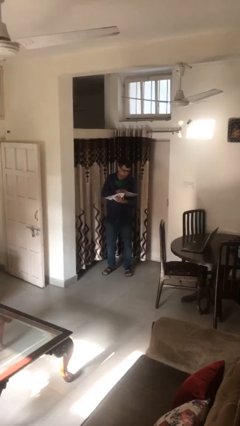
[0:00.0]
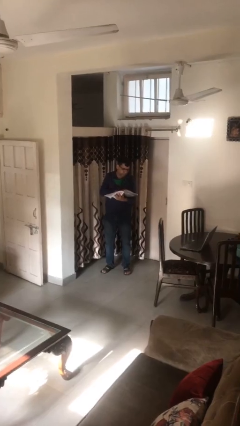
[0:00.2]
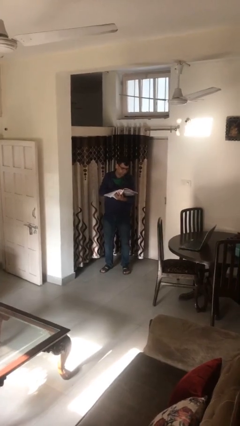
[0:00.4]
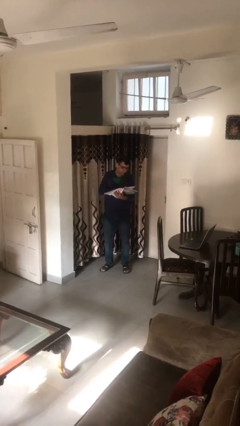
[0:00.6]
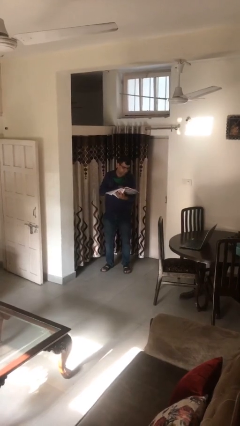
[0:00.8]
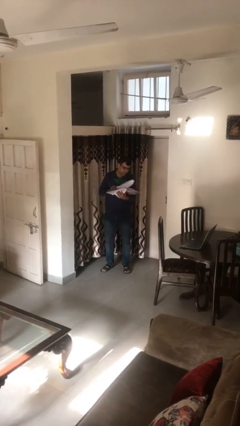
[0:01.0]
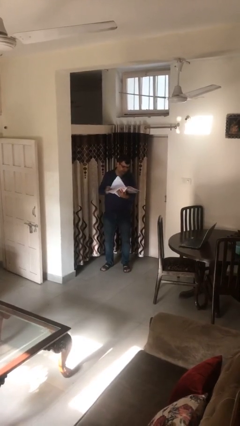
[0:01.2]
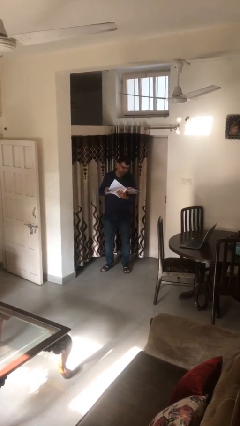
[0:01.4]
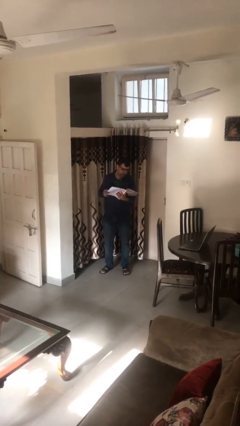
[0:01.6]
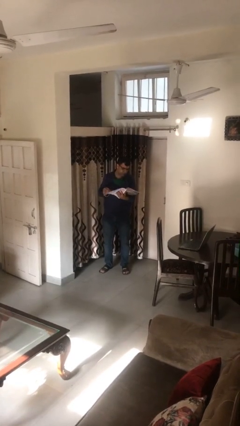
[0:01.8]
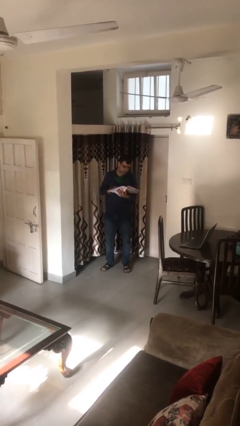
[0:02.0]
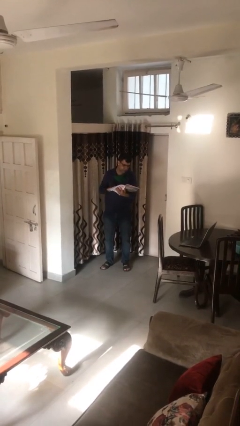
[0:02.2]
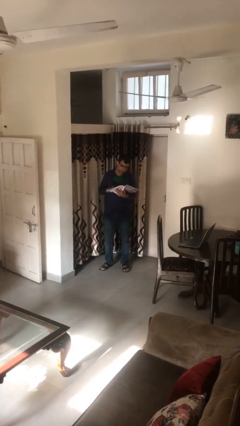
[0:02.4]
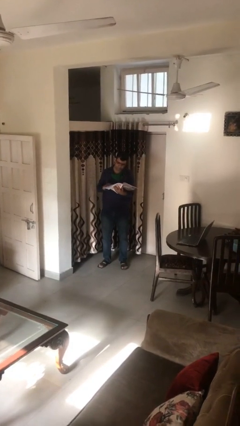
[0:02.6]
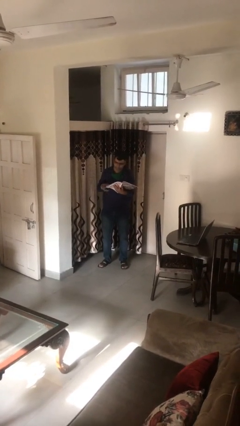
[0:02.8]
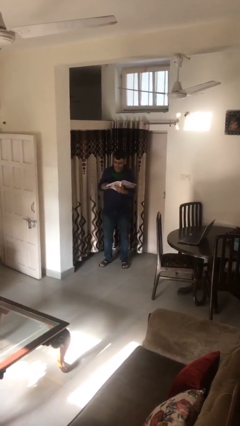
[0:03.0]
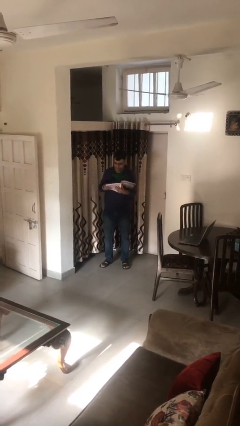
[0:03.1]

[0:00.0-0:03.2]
person reads document

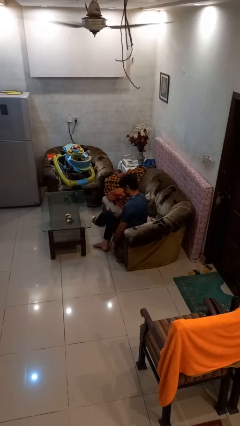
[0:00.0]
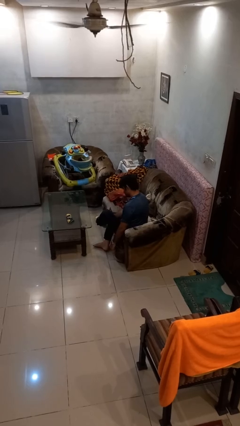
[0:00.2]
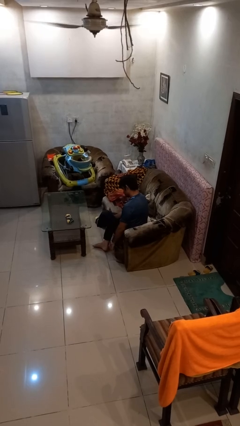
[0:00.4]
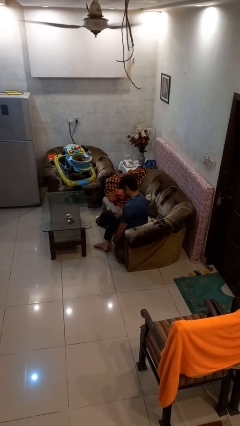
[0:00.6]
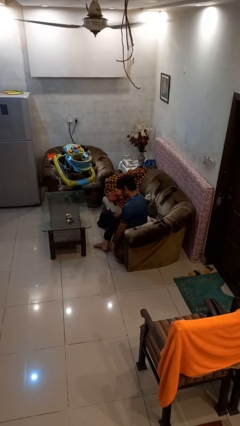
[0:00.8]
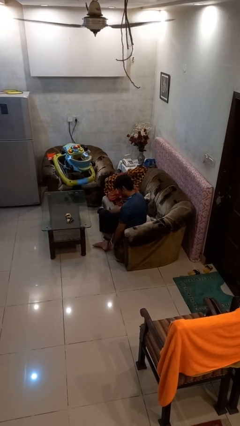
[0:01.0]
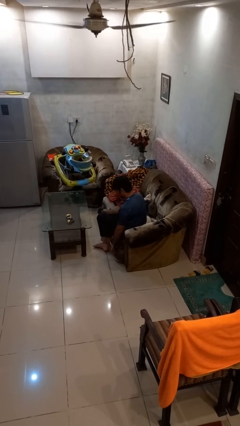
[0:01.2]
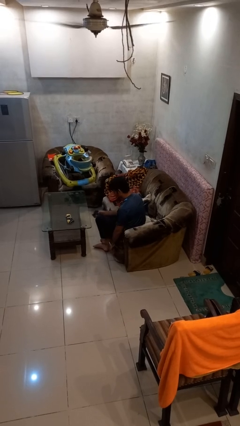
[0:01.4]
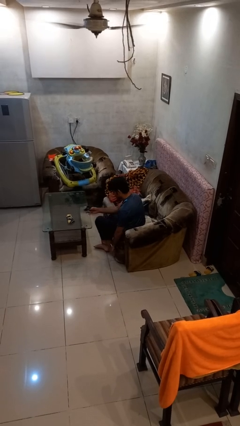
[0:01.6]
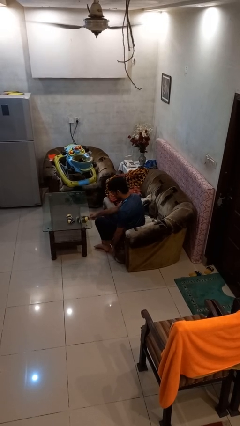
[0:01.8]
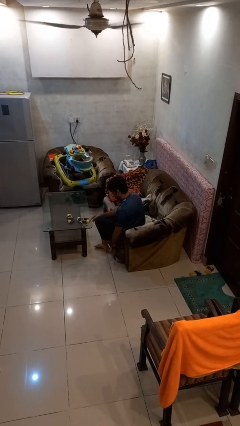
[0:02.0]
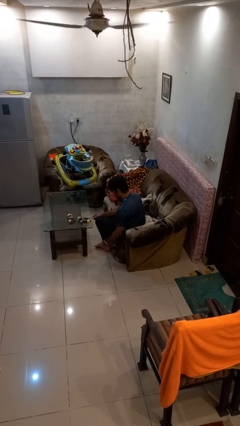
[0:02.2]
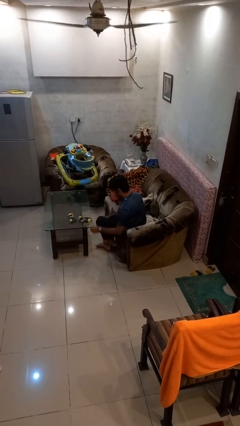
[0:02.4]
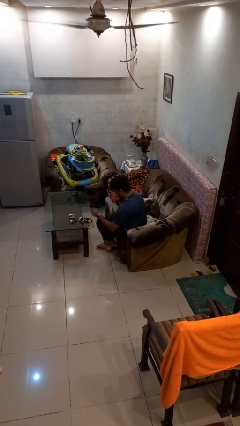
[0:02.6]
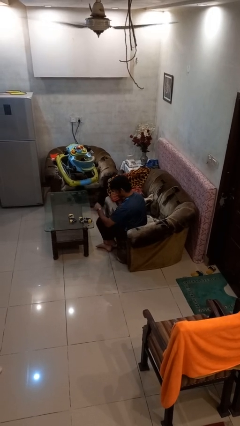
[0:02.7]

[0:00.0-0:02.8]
person takes off socks

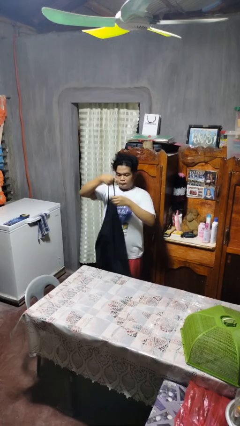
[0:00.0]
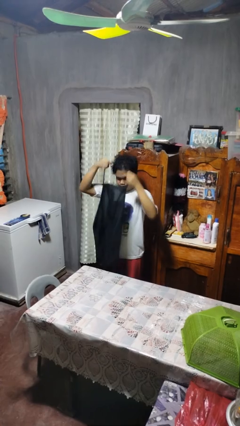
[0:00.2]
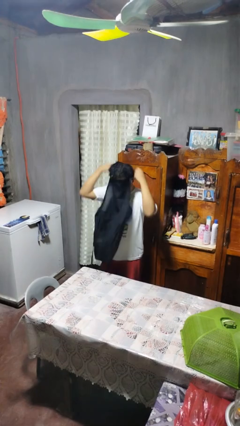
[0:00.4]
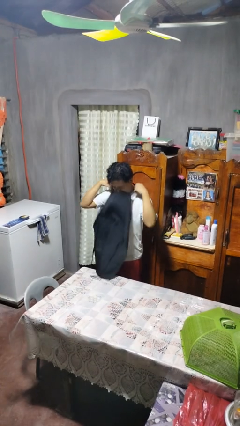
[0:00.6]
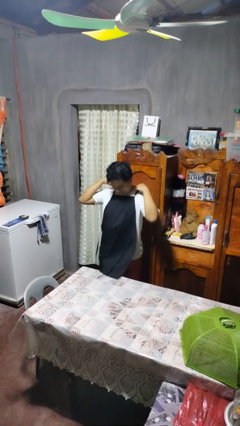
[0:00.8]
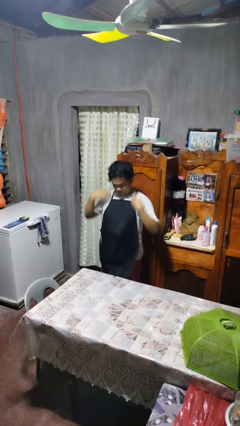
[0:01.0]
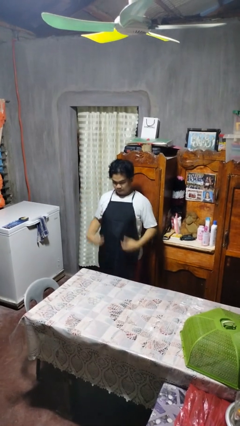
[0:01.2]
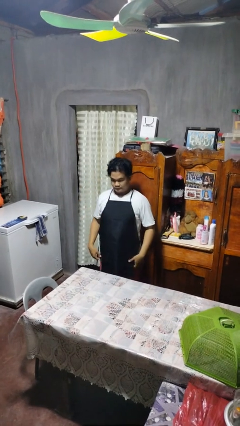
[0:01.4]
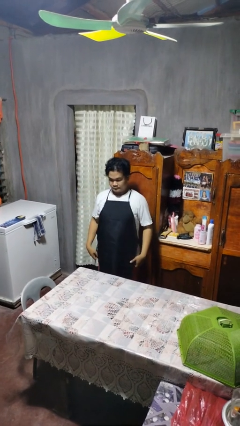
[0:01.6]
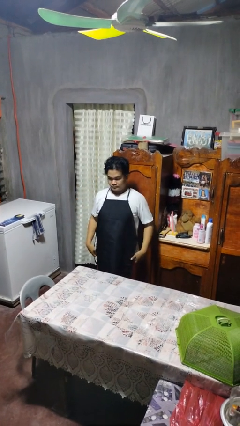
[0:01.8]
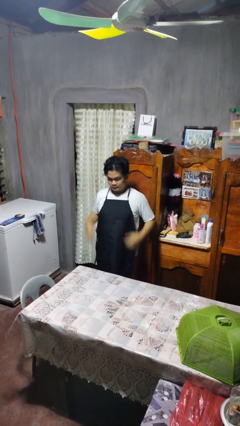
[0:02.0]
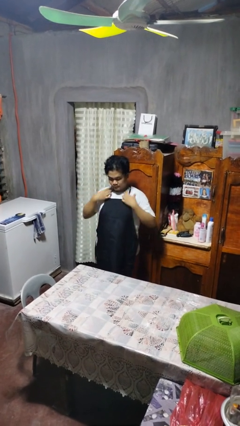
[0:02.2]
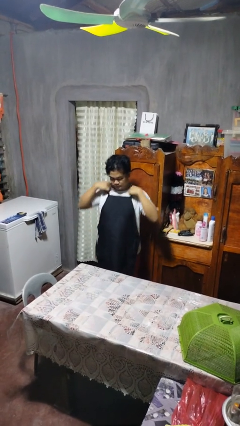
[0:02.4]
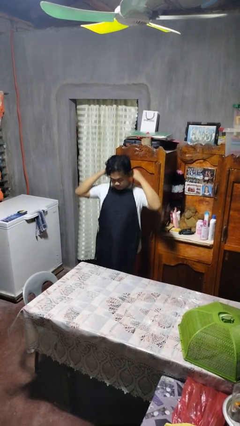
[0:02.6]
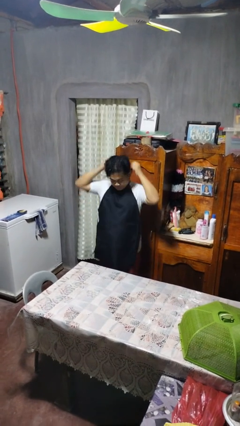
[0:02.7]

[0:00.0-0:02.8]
person puts on apron

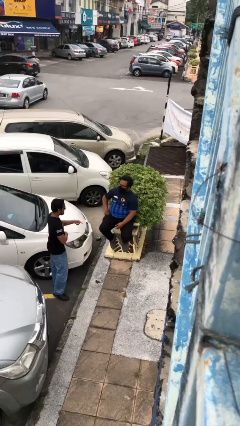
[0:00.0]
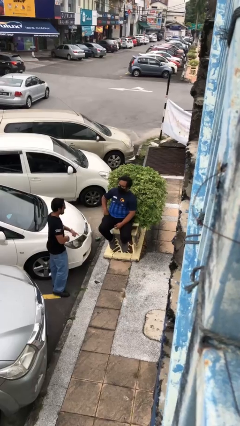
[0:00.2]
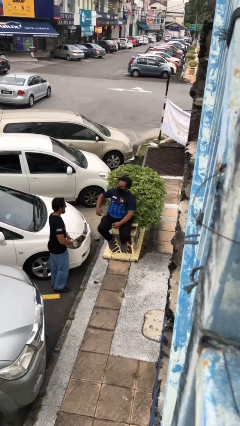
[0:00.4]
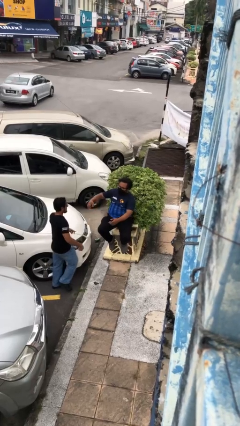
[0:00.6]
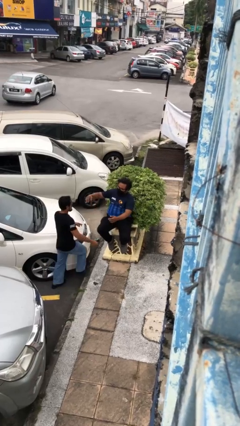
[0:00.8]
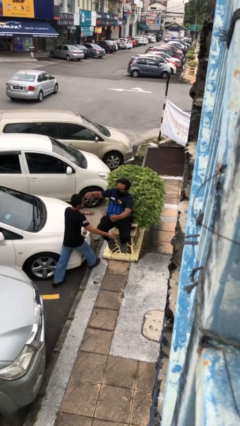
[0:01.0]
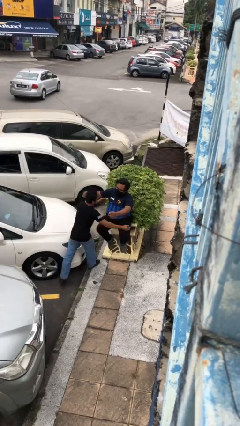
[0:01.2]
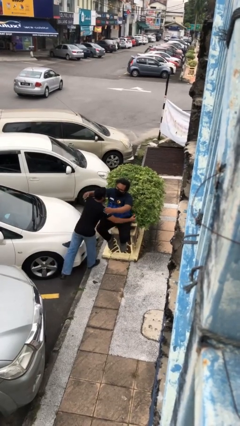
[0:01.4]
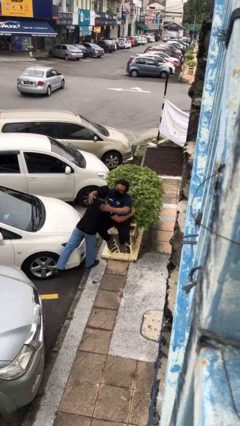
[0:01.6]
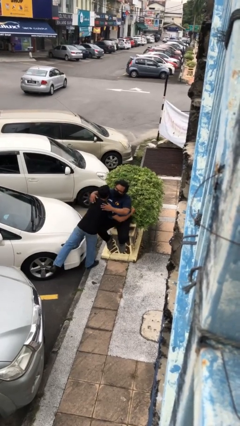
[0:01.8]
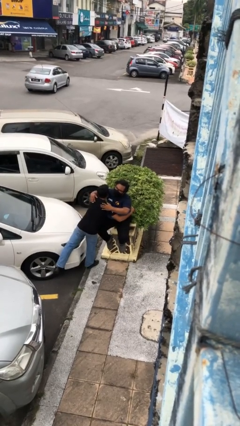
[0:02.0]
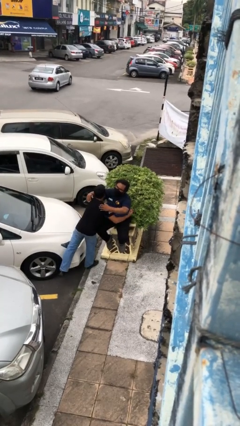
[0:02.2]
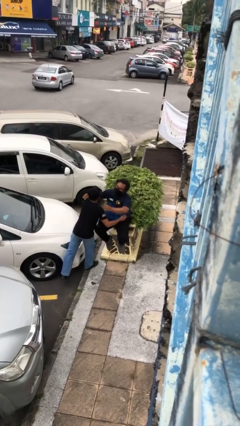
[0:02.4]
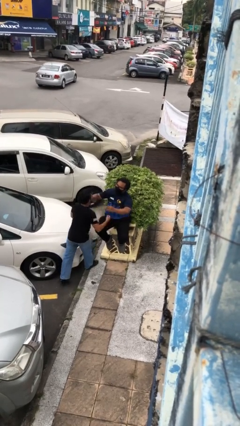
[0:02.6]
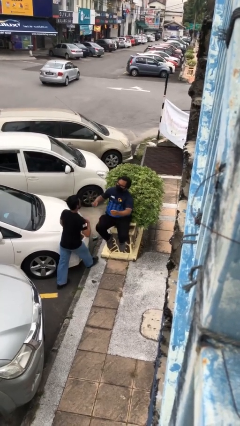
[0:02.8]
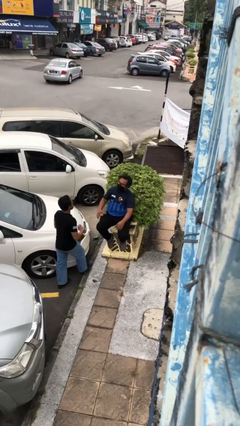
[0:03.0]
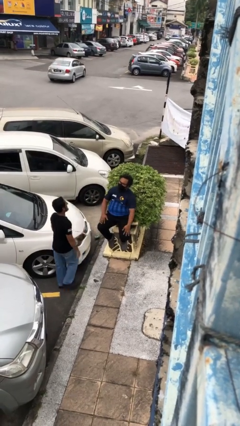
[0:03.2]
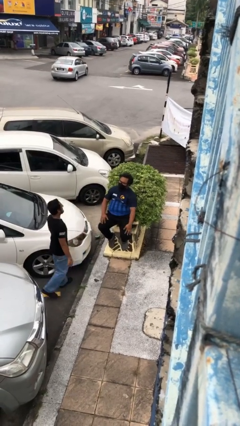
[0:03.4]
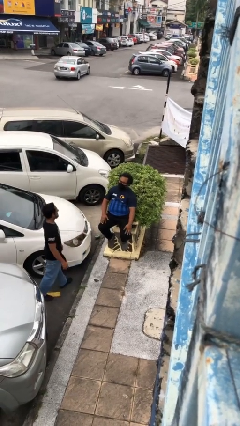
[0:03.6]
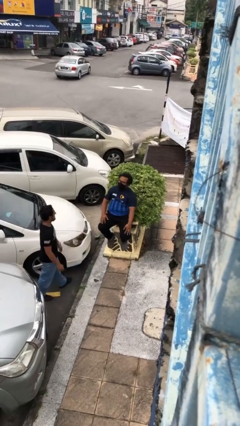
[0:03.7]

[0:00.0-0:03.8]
person embraces person

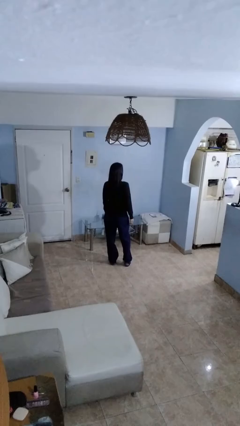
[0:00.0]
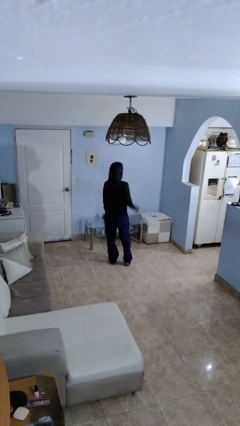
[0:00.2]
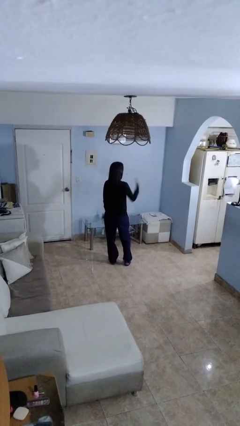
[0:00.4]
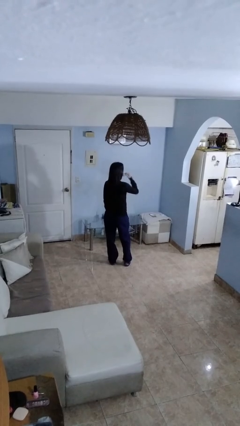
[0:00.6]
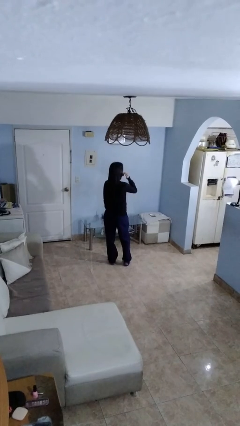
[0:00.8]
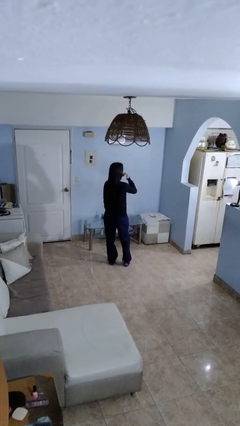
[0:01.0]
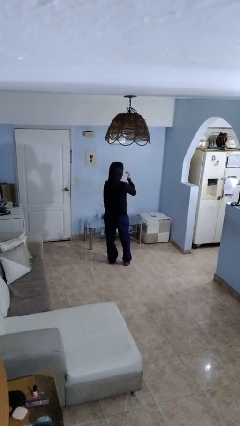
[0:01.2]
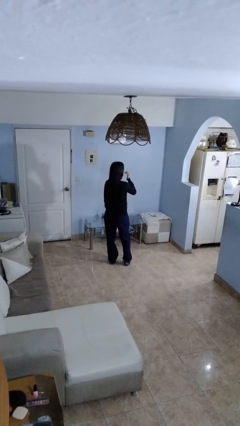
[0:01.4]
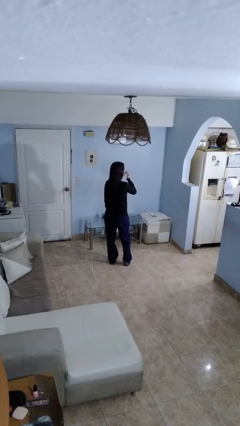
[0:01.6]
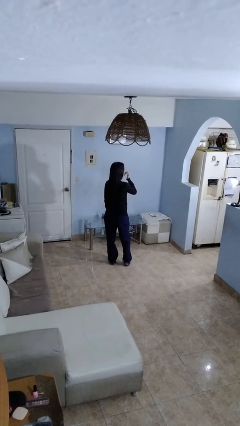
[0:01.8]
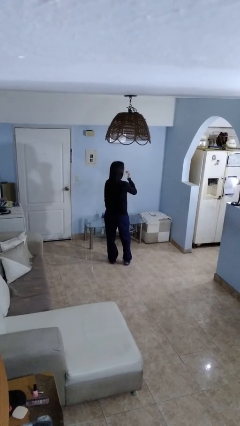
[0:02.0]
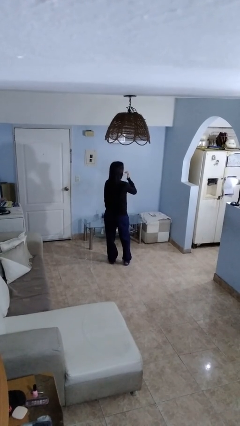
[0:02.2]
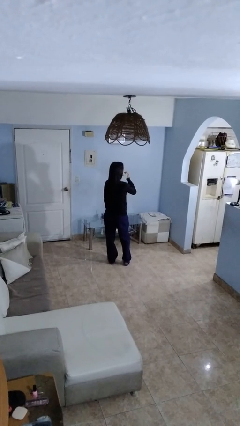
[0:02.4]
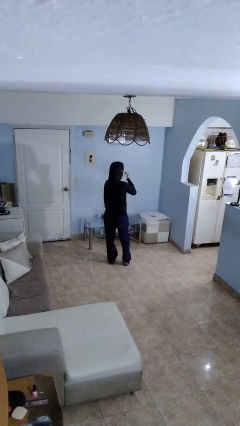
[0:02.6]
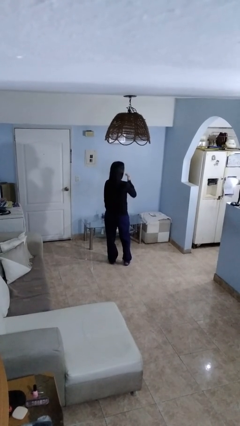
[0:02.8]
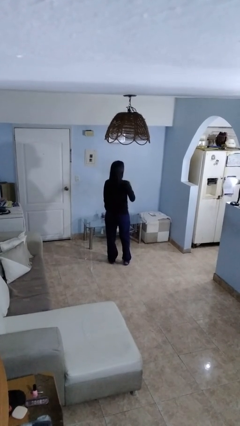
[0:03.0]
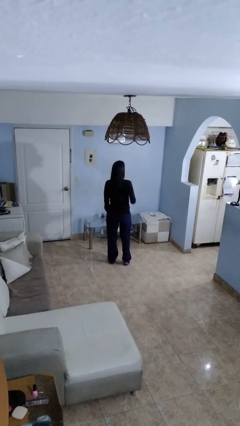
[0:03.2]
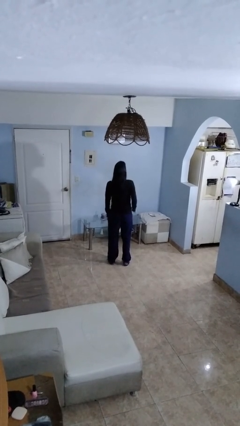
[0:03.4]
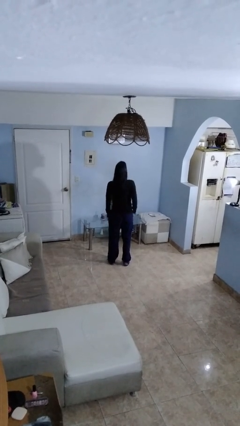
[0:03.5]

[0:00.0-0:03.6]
person licks fingers

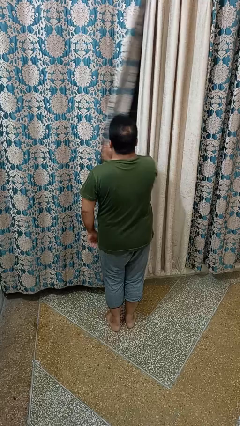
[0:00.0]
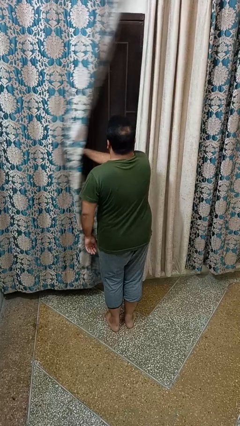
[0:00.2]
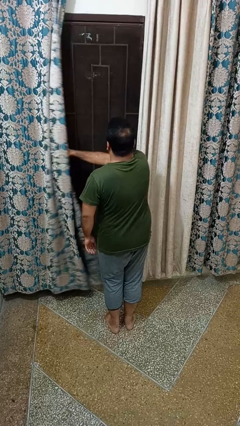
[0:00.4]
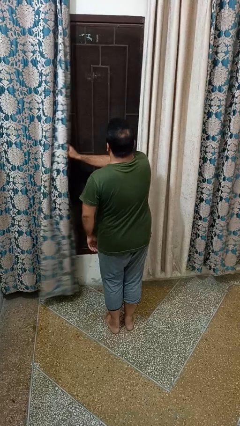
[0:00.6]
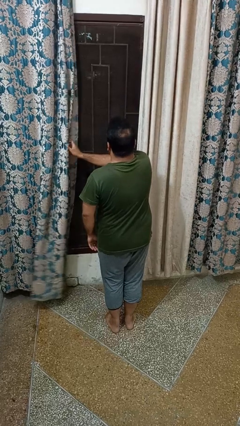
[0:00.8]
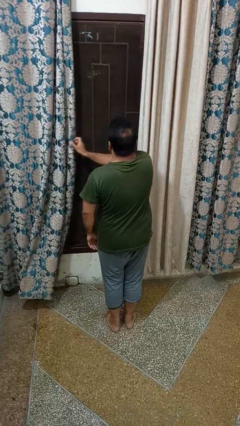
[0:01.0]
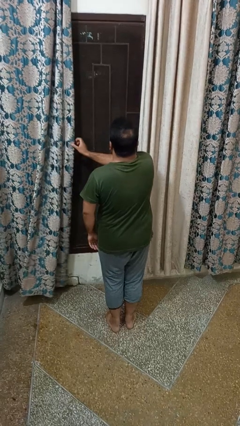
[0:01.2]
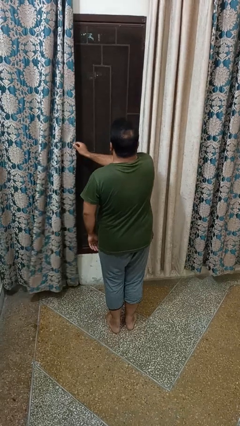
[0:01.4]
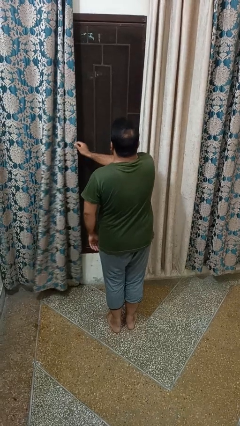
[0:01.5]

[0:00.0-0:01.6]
person opens curtains
